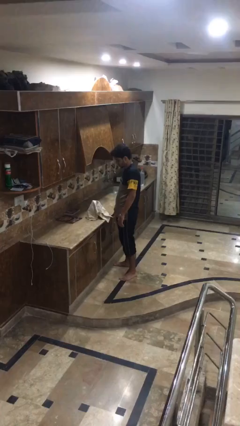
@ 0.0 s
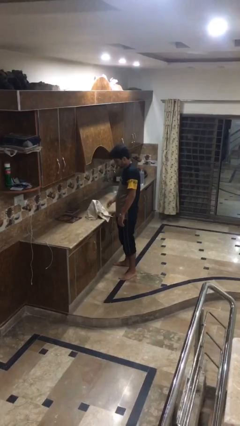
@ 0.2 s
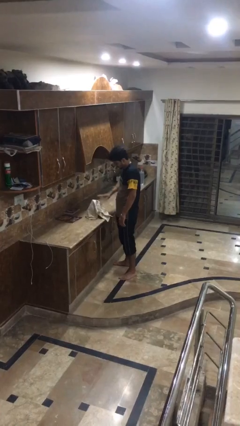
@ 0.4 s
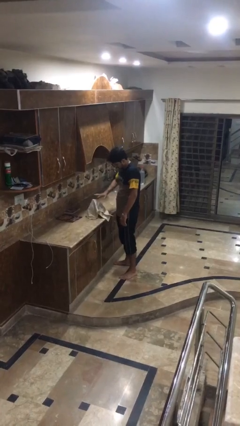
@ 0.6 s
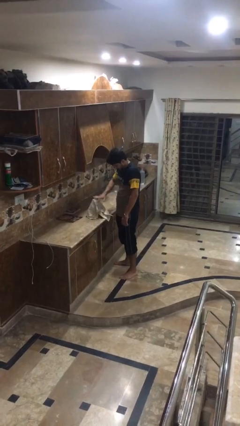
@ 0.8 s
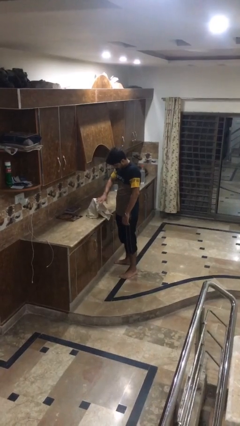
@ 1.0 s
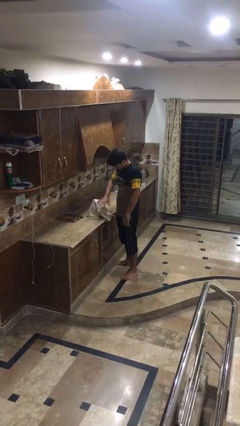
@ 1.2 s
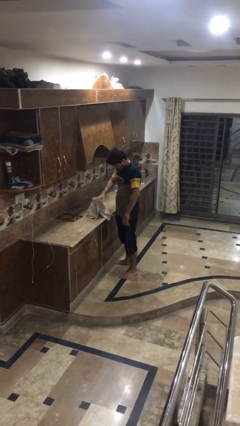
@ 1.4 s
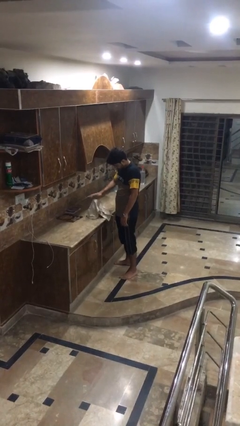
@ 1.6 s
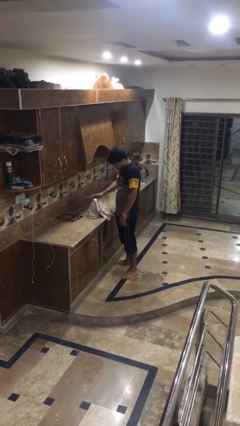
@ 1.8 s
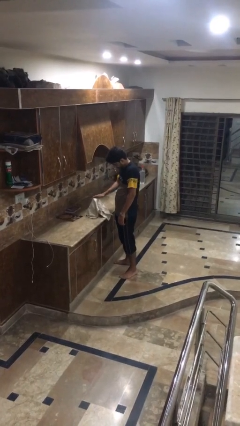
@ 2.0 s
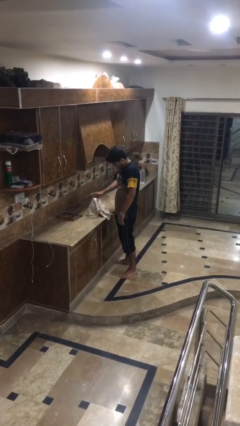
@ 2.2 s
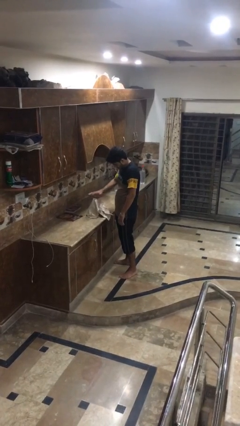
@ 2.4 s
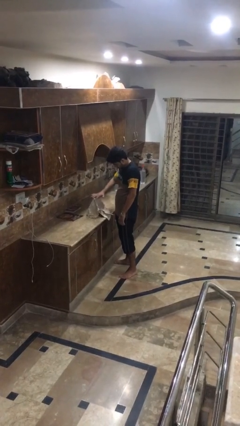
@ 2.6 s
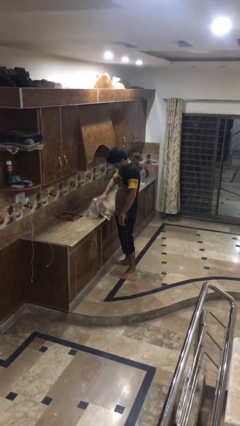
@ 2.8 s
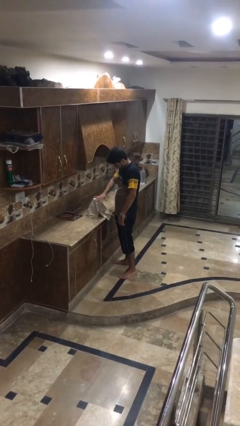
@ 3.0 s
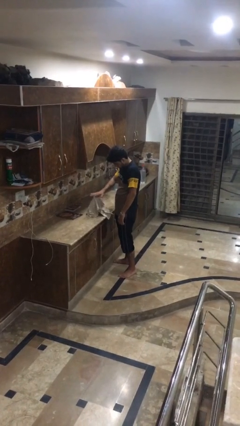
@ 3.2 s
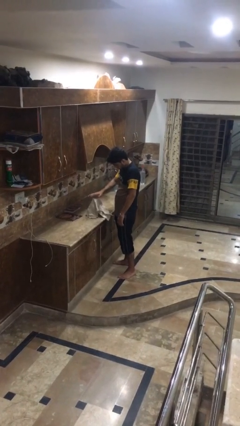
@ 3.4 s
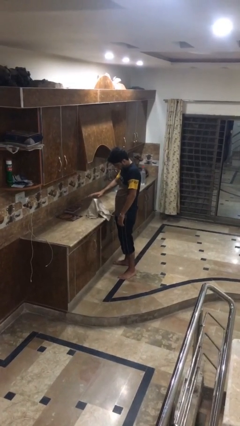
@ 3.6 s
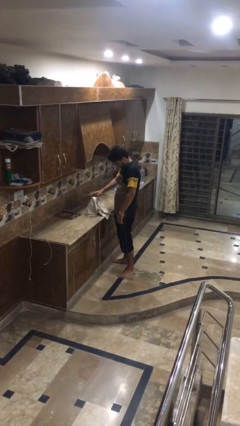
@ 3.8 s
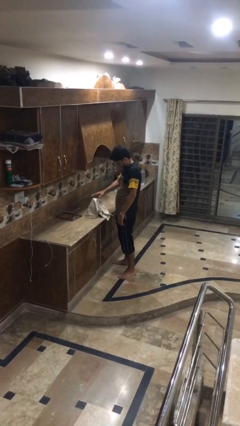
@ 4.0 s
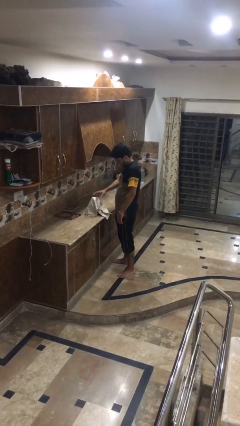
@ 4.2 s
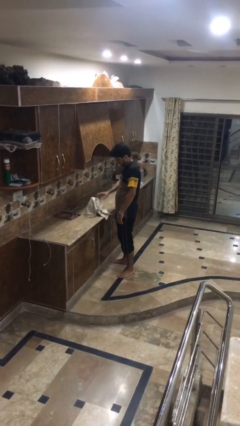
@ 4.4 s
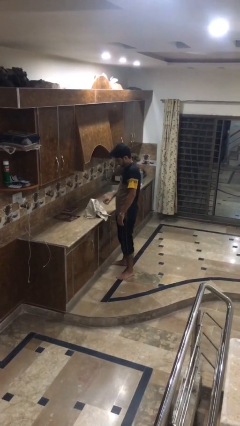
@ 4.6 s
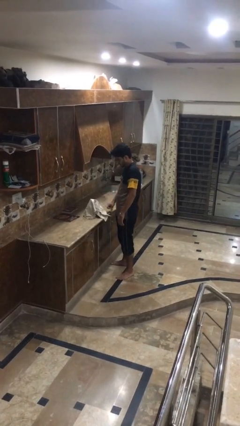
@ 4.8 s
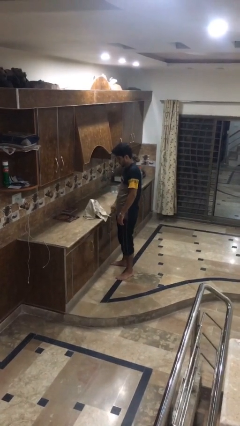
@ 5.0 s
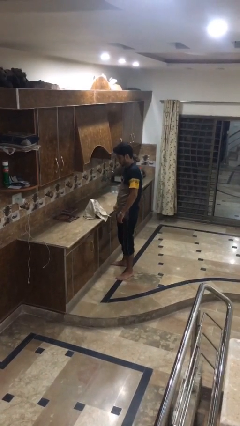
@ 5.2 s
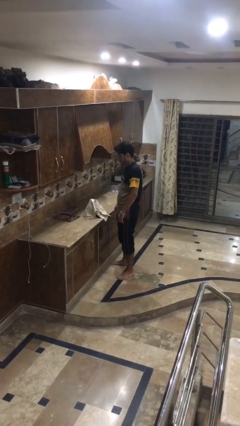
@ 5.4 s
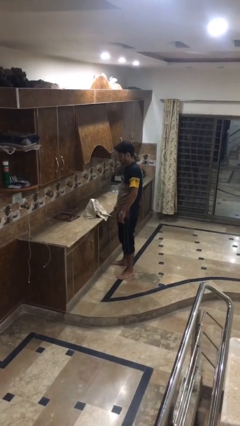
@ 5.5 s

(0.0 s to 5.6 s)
person waves hand over object

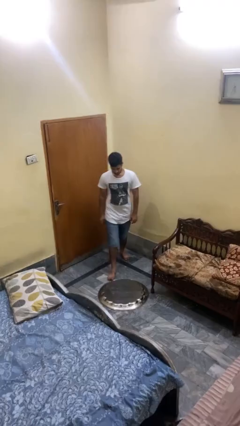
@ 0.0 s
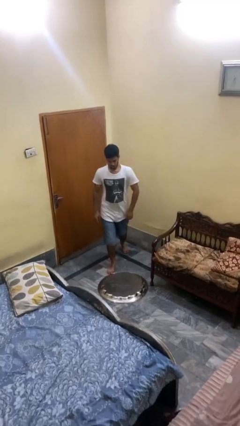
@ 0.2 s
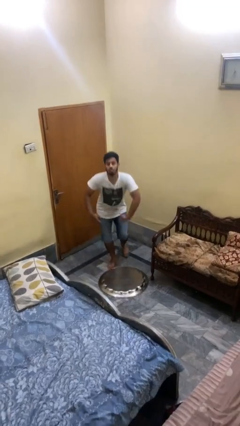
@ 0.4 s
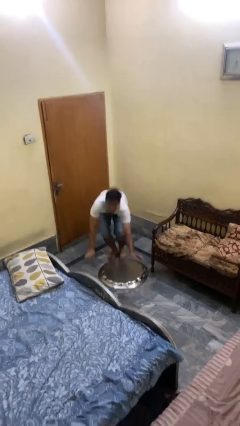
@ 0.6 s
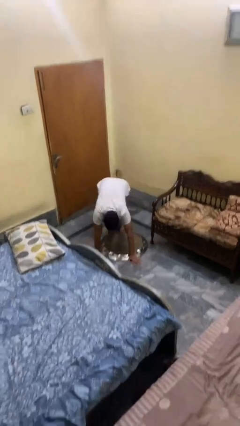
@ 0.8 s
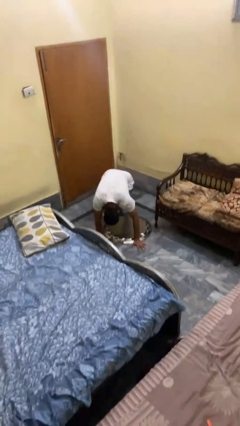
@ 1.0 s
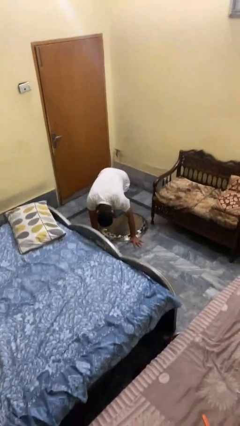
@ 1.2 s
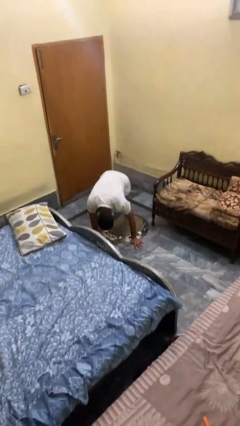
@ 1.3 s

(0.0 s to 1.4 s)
person trips on object on floor

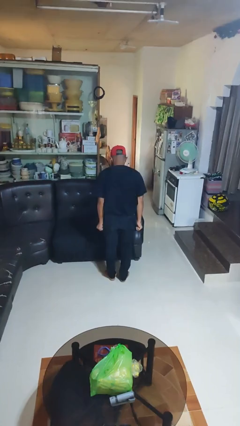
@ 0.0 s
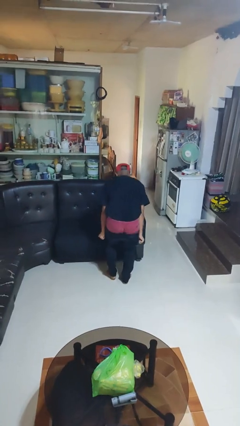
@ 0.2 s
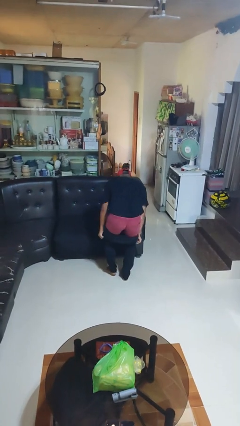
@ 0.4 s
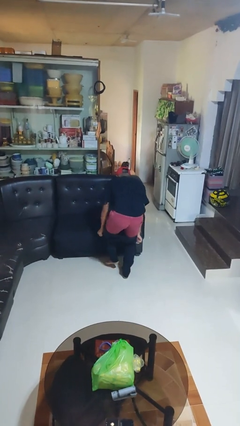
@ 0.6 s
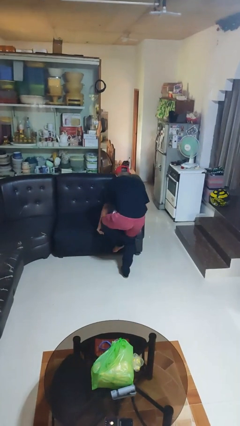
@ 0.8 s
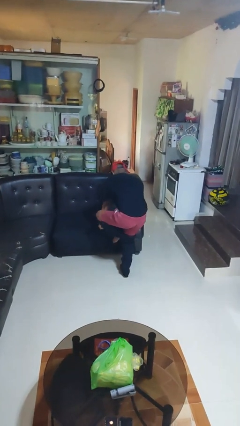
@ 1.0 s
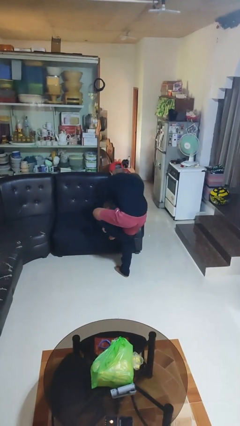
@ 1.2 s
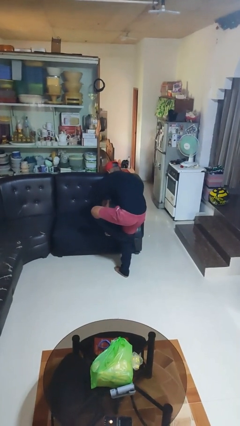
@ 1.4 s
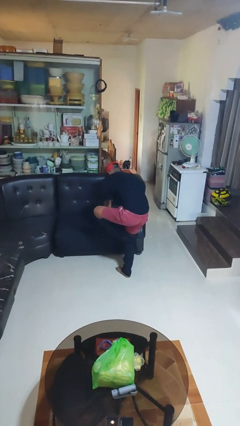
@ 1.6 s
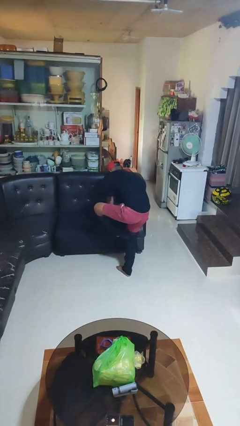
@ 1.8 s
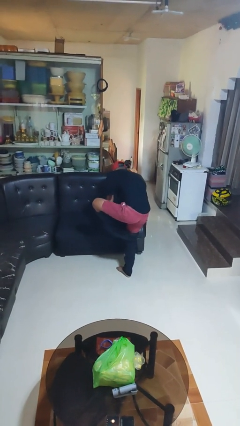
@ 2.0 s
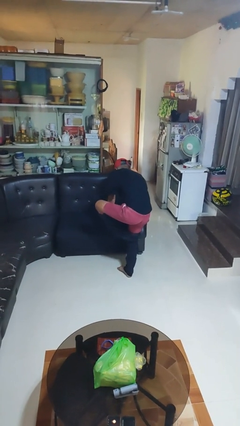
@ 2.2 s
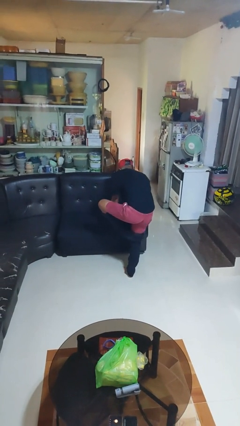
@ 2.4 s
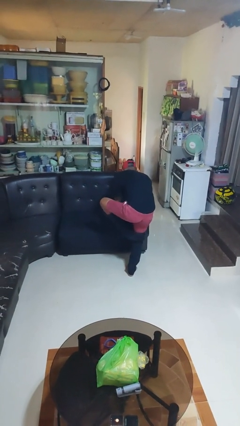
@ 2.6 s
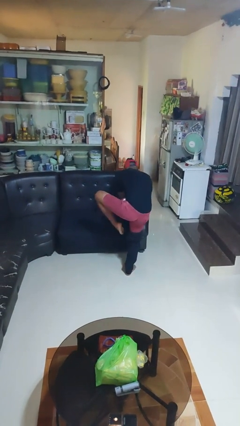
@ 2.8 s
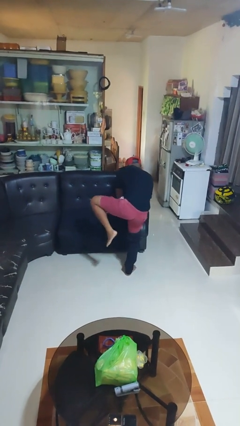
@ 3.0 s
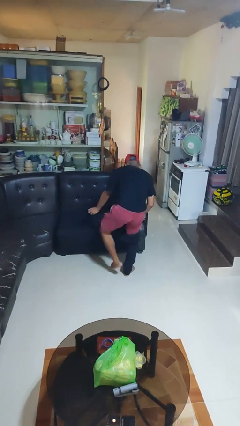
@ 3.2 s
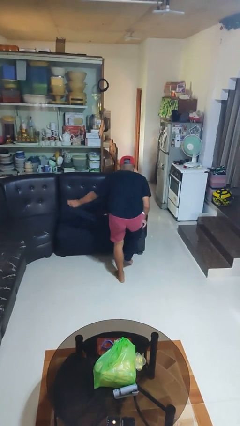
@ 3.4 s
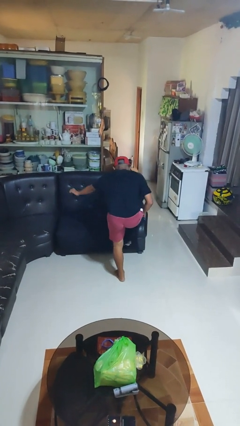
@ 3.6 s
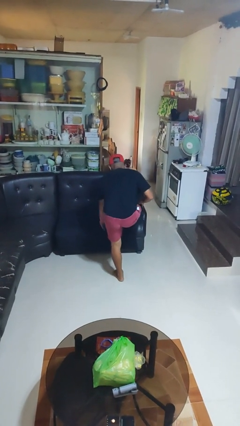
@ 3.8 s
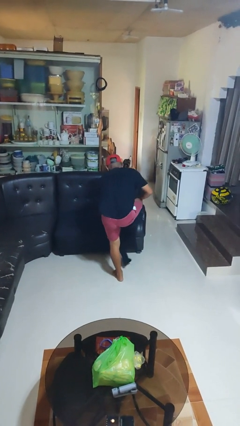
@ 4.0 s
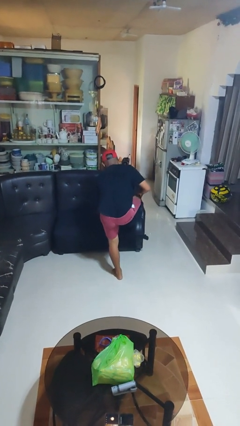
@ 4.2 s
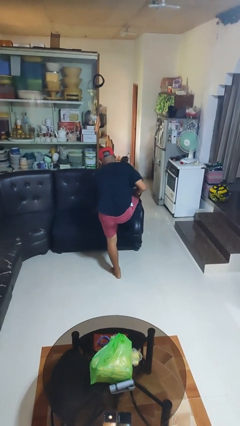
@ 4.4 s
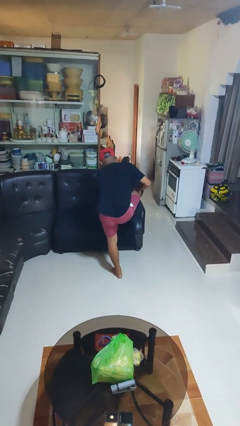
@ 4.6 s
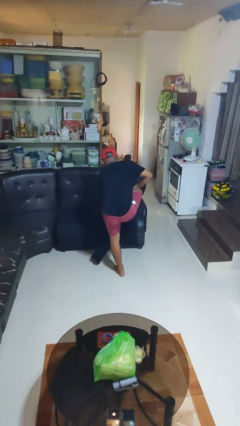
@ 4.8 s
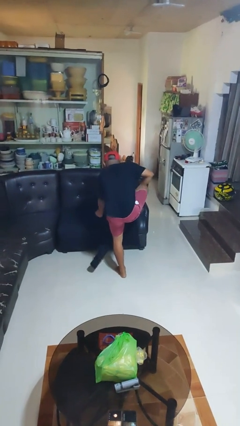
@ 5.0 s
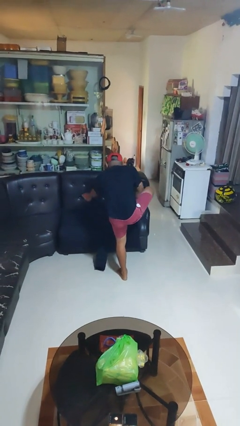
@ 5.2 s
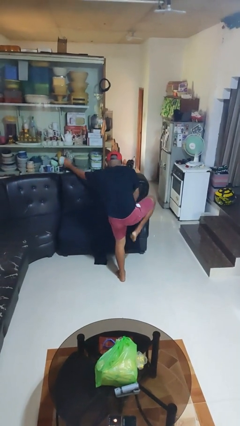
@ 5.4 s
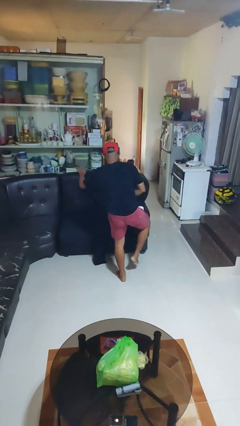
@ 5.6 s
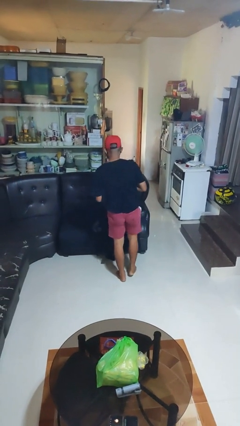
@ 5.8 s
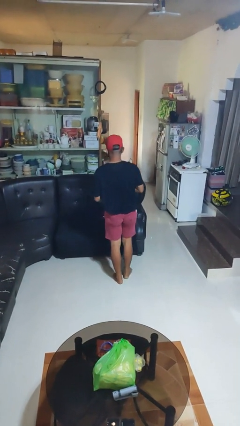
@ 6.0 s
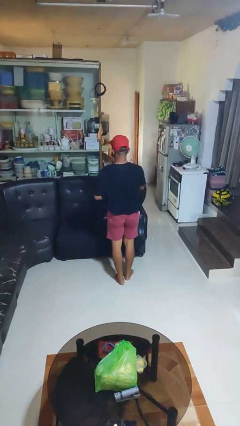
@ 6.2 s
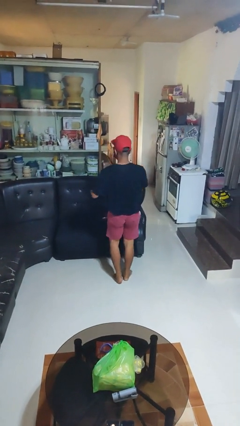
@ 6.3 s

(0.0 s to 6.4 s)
person takes off pants

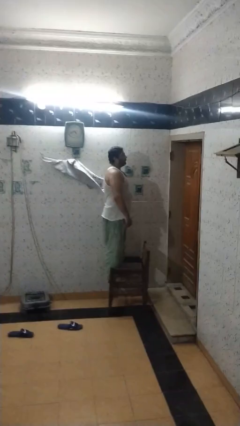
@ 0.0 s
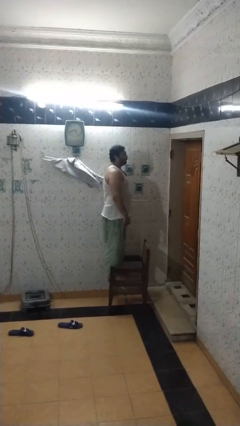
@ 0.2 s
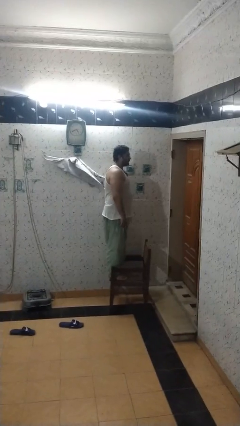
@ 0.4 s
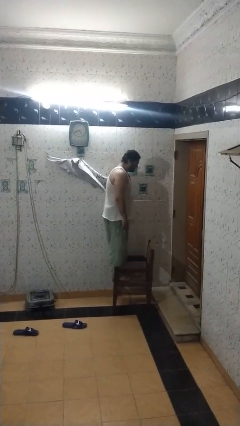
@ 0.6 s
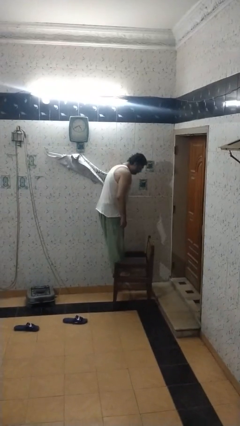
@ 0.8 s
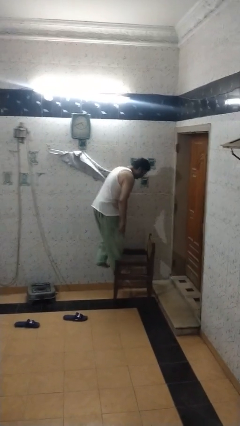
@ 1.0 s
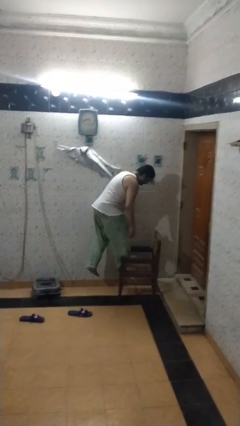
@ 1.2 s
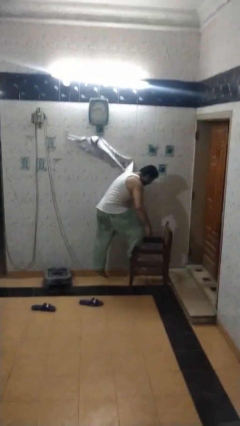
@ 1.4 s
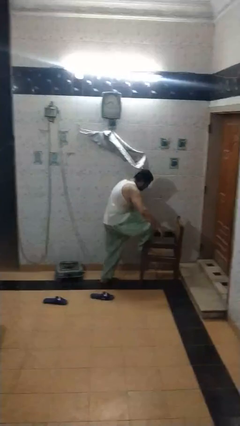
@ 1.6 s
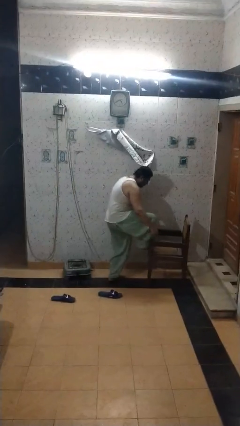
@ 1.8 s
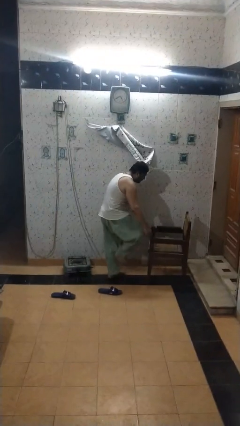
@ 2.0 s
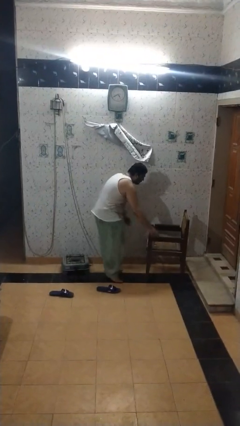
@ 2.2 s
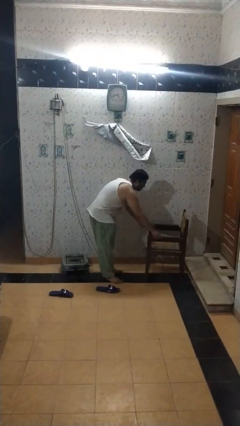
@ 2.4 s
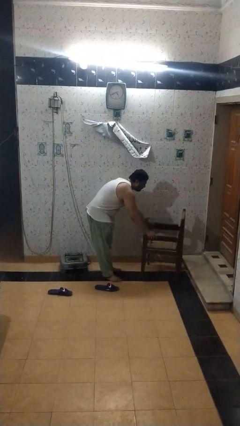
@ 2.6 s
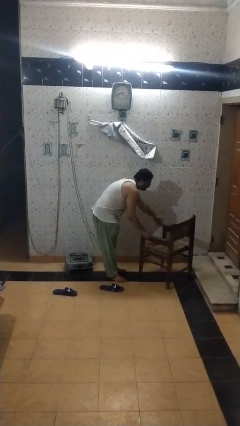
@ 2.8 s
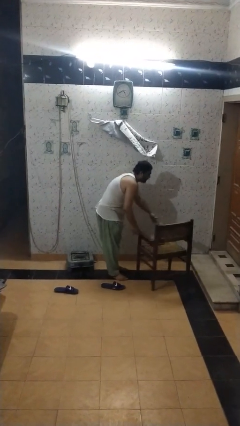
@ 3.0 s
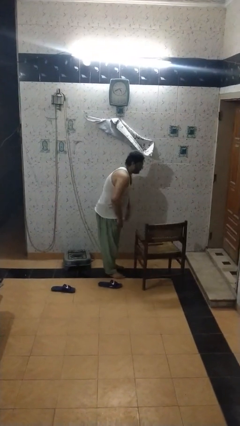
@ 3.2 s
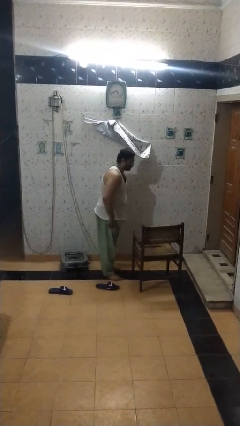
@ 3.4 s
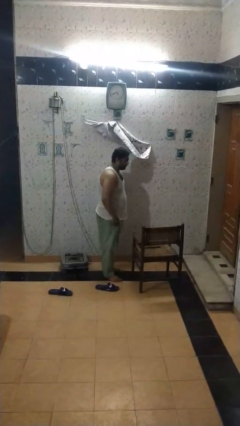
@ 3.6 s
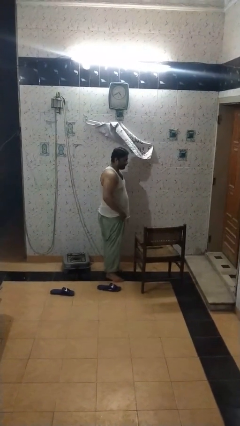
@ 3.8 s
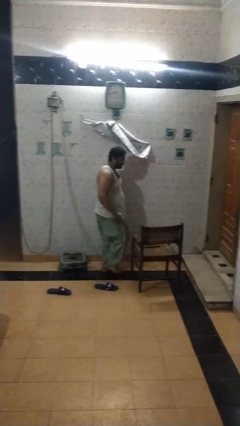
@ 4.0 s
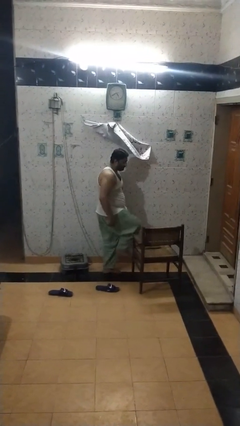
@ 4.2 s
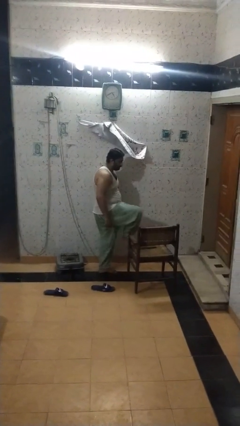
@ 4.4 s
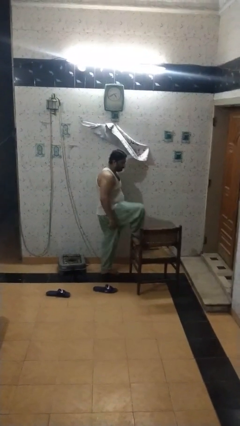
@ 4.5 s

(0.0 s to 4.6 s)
person climbs off chair
